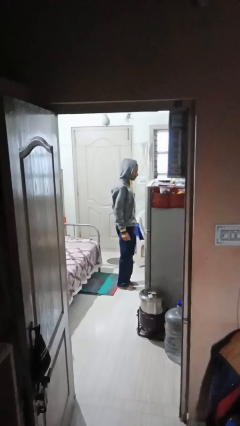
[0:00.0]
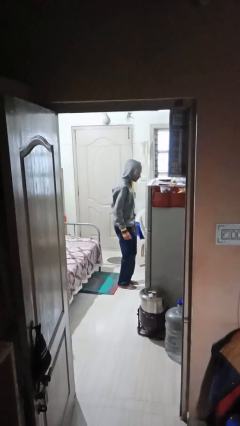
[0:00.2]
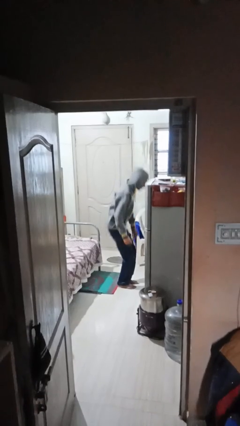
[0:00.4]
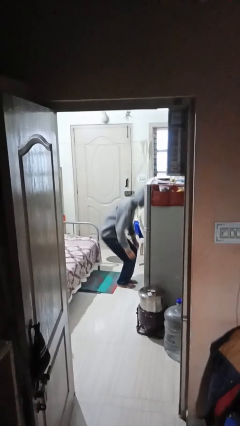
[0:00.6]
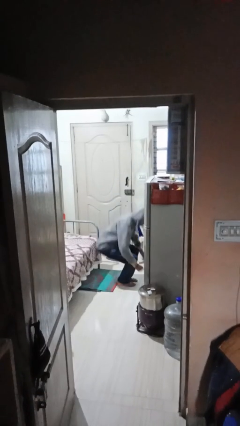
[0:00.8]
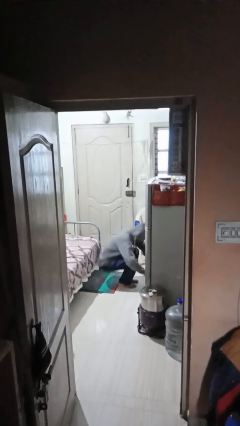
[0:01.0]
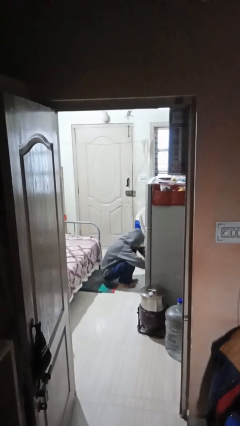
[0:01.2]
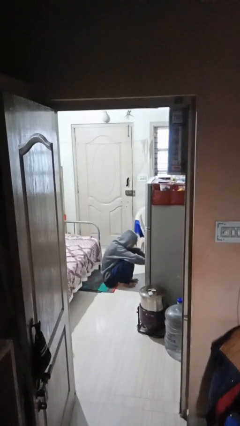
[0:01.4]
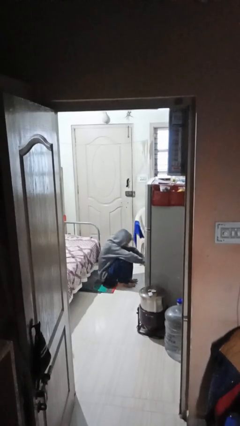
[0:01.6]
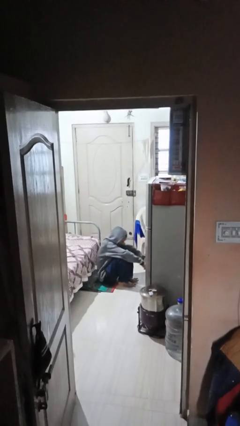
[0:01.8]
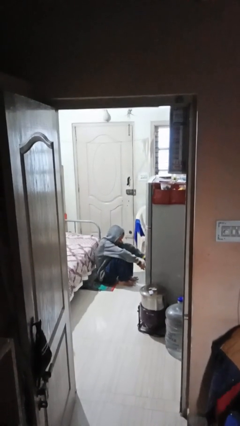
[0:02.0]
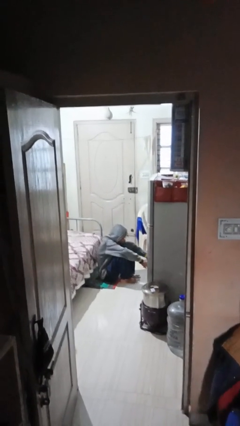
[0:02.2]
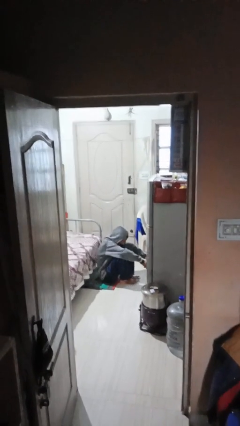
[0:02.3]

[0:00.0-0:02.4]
person sits down

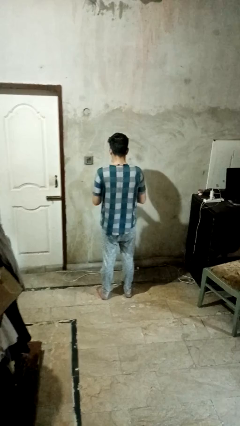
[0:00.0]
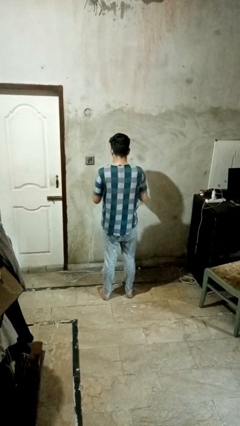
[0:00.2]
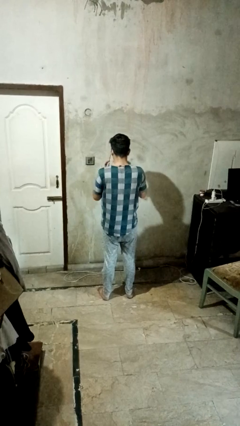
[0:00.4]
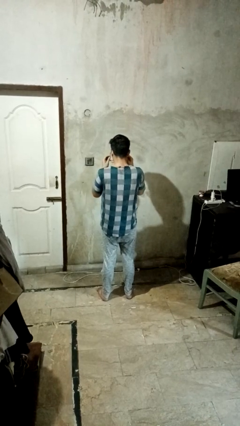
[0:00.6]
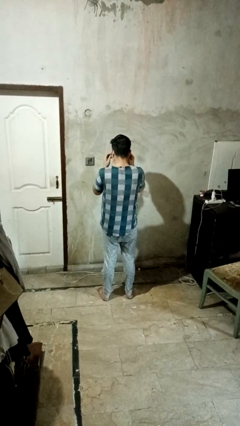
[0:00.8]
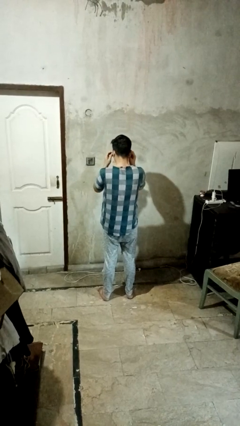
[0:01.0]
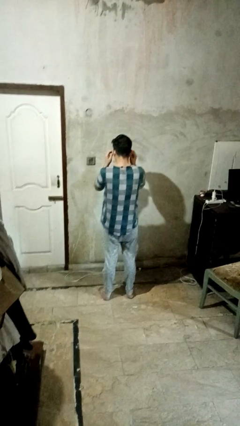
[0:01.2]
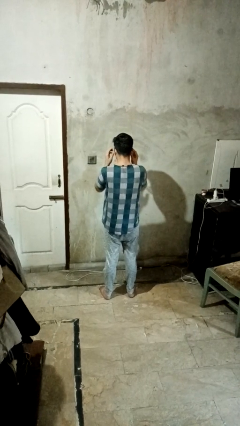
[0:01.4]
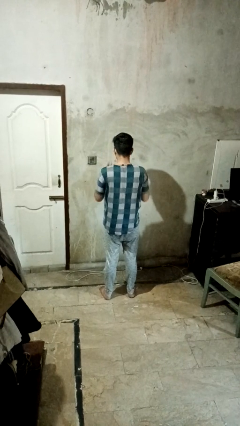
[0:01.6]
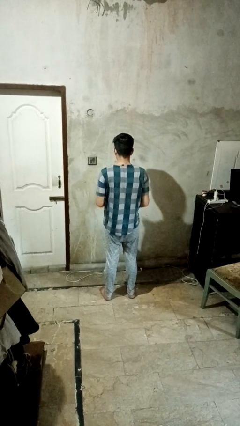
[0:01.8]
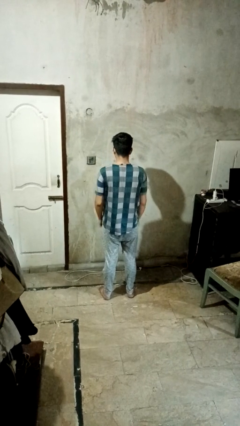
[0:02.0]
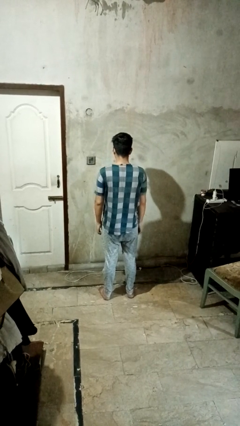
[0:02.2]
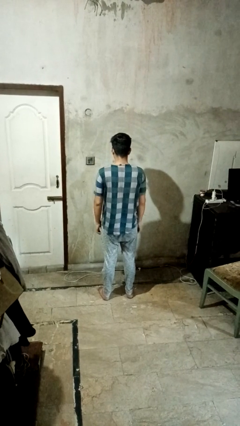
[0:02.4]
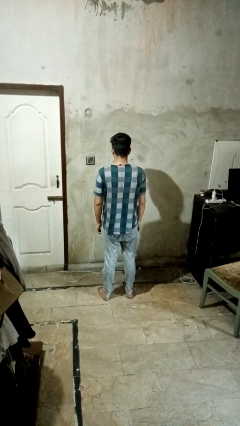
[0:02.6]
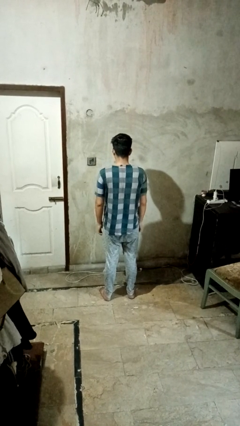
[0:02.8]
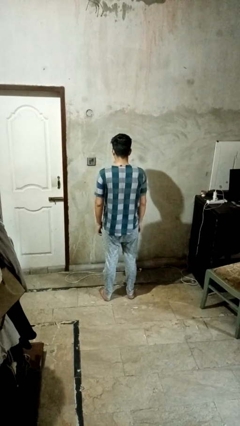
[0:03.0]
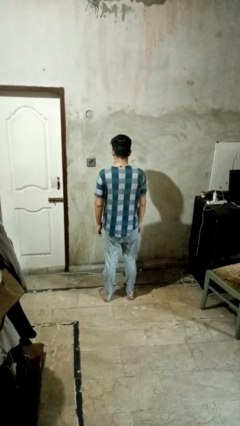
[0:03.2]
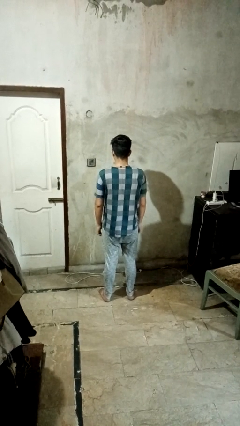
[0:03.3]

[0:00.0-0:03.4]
person puts on glasses

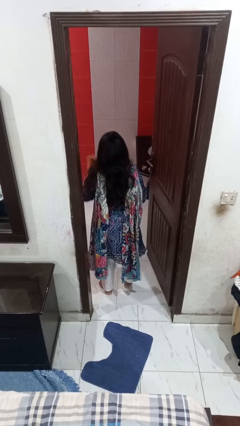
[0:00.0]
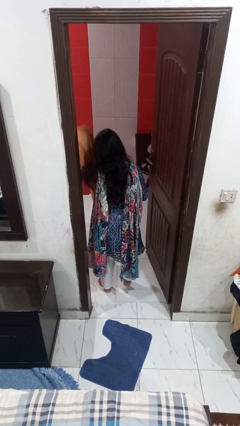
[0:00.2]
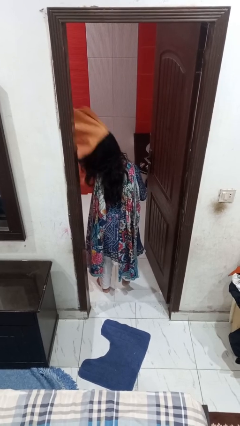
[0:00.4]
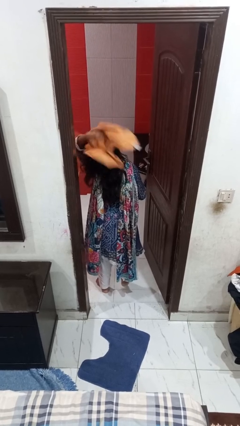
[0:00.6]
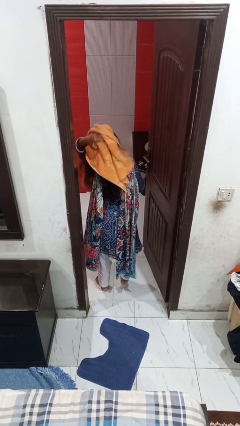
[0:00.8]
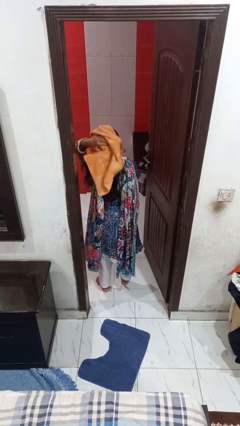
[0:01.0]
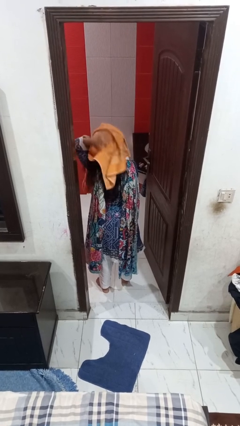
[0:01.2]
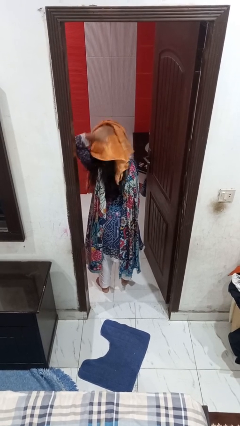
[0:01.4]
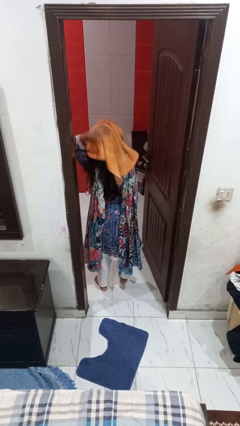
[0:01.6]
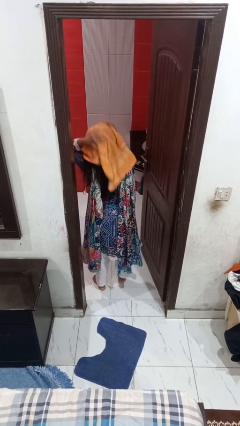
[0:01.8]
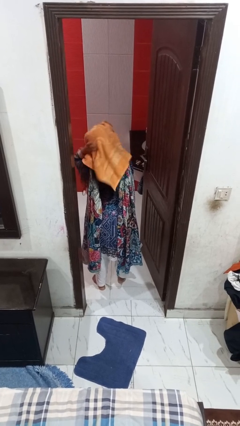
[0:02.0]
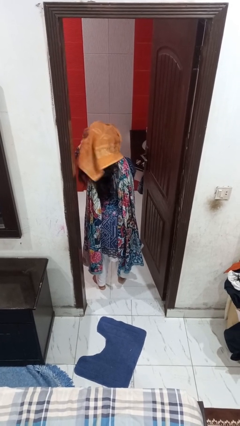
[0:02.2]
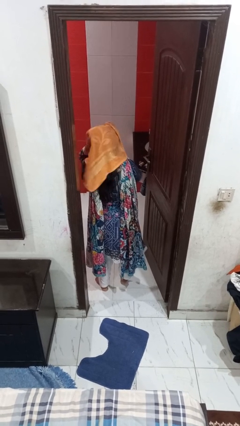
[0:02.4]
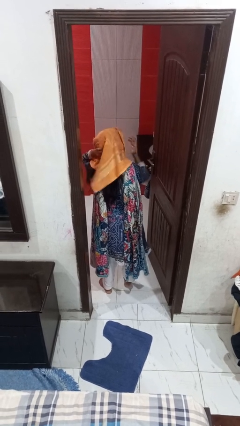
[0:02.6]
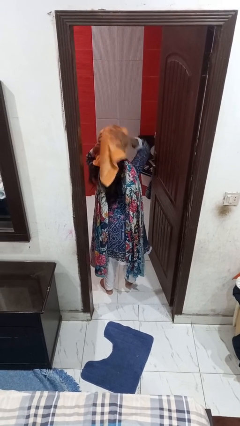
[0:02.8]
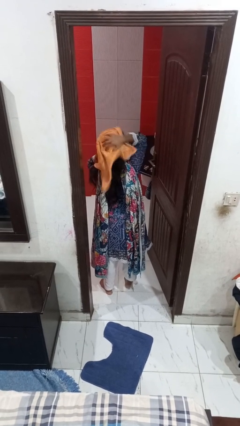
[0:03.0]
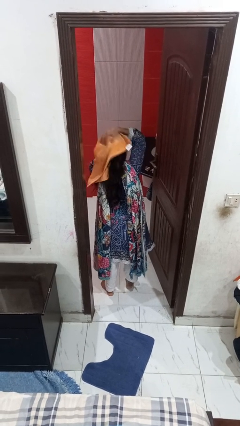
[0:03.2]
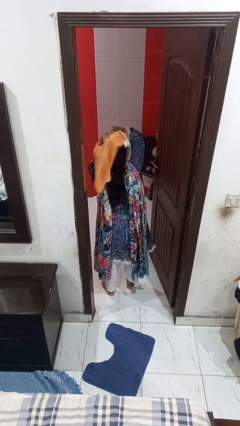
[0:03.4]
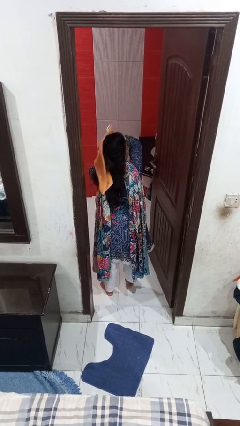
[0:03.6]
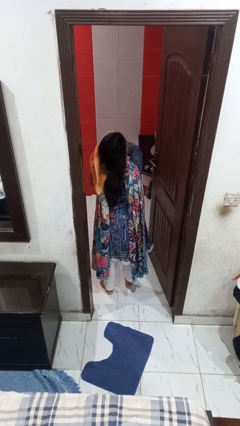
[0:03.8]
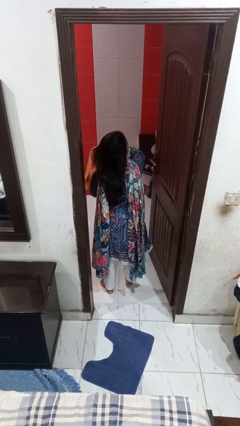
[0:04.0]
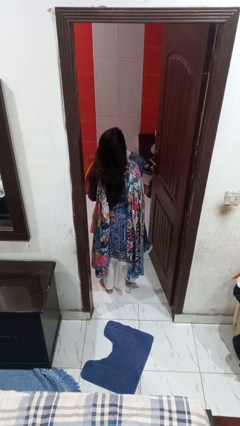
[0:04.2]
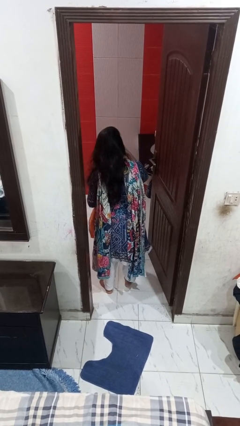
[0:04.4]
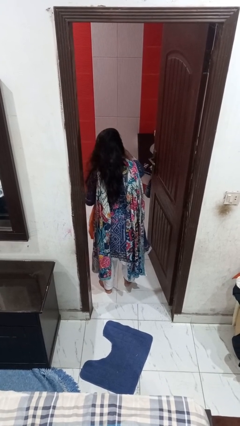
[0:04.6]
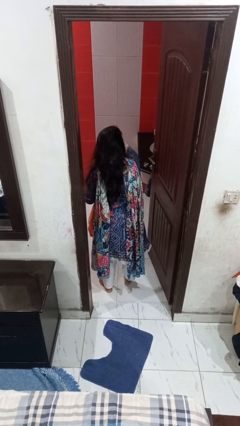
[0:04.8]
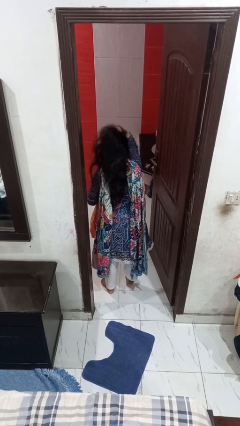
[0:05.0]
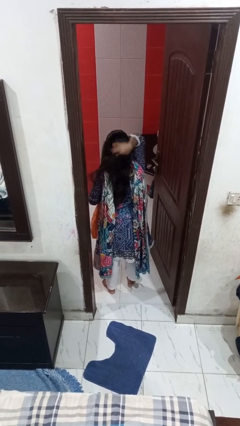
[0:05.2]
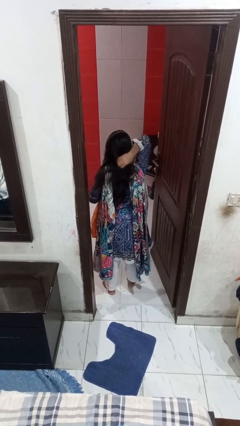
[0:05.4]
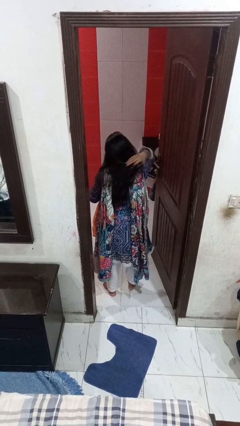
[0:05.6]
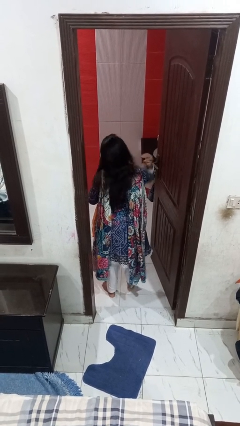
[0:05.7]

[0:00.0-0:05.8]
person dries hair with towel

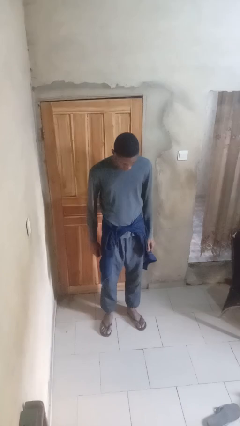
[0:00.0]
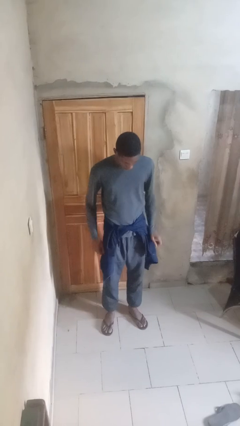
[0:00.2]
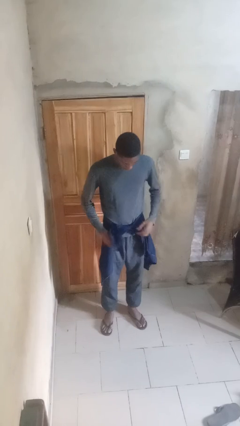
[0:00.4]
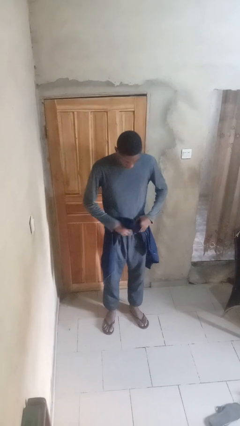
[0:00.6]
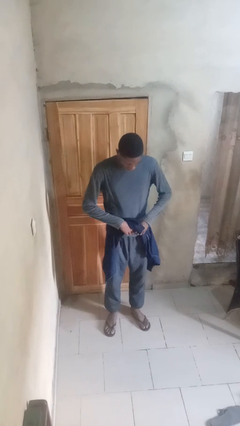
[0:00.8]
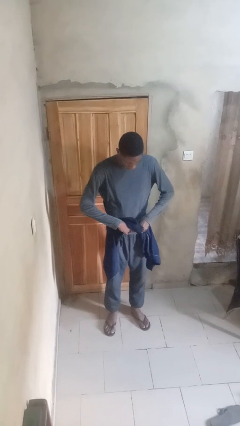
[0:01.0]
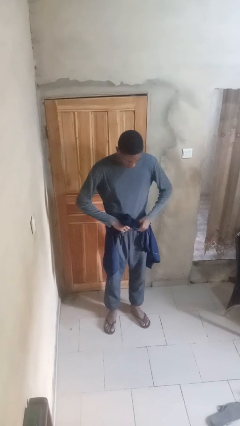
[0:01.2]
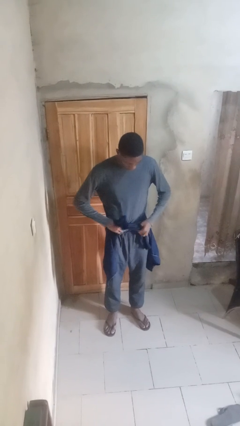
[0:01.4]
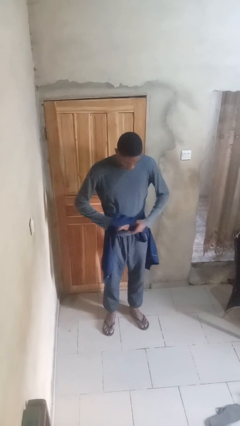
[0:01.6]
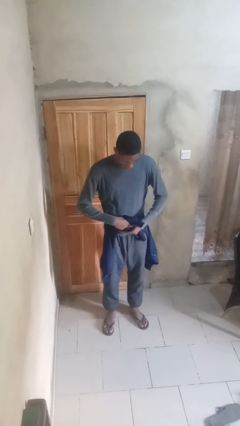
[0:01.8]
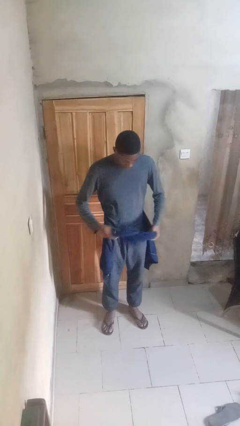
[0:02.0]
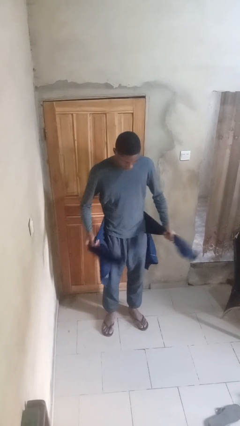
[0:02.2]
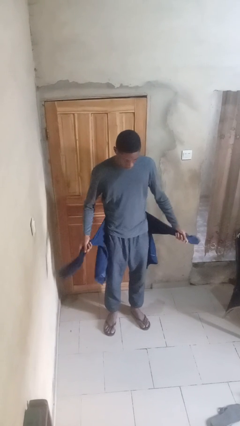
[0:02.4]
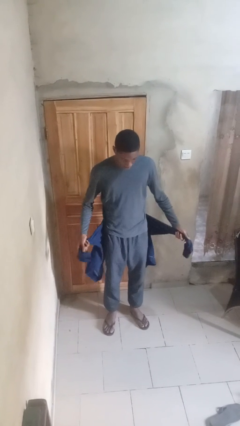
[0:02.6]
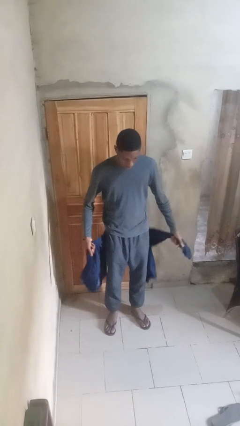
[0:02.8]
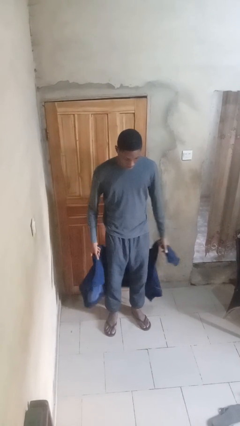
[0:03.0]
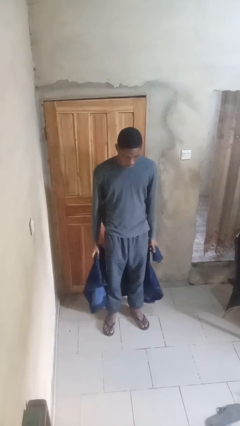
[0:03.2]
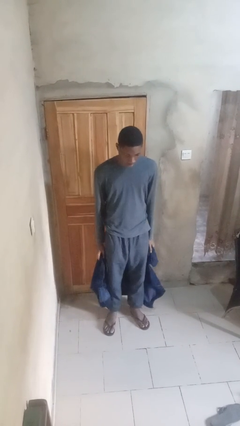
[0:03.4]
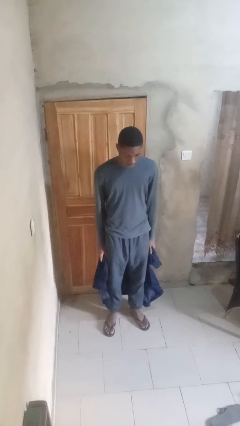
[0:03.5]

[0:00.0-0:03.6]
person unties jacket around waist

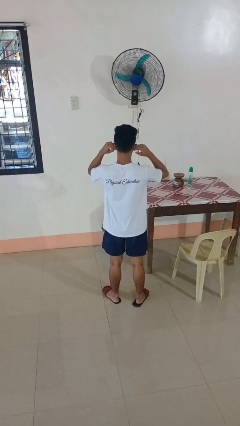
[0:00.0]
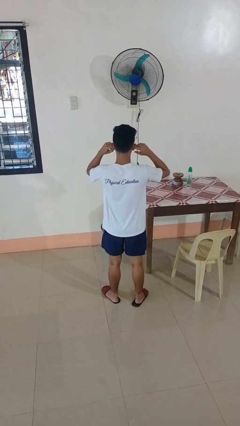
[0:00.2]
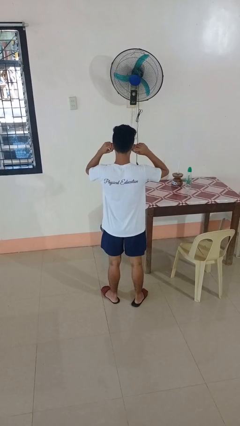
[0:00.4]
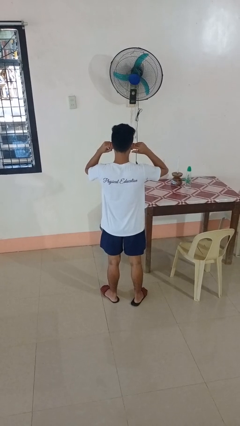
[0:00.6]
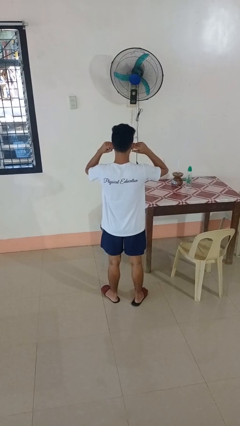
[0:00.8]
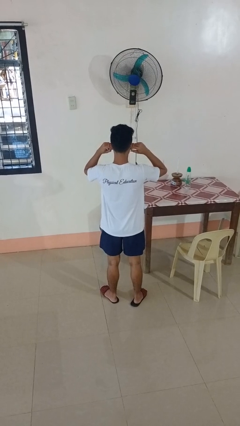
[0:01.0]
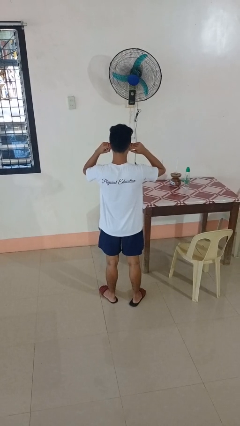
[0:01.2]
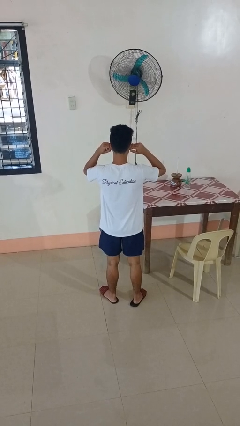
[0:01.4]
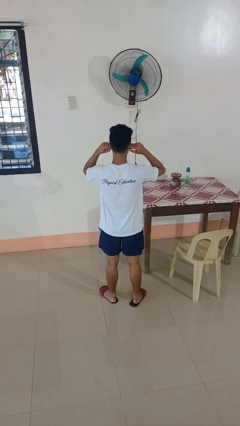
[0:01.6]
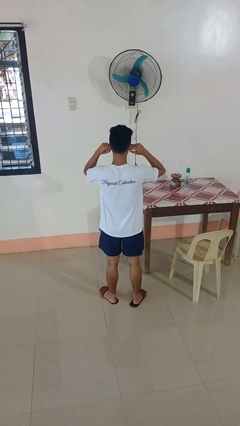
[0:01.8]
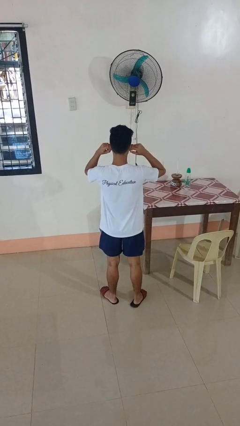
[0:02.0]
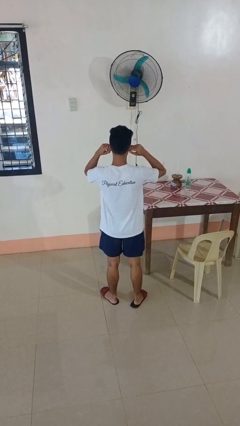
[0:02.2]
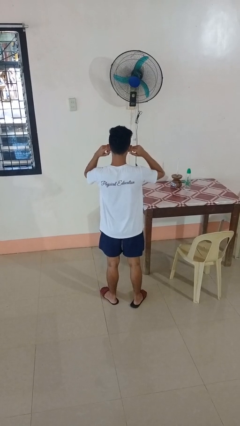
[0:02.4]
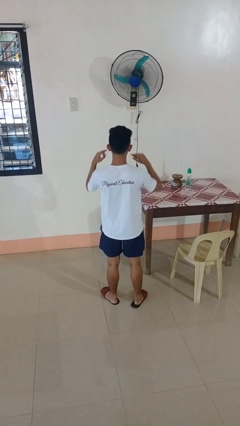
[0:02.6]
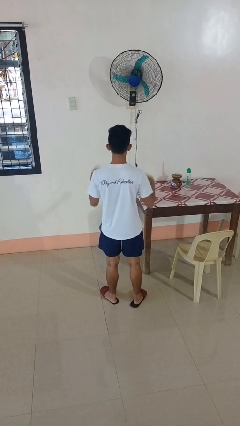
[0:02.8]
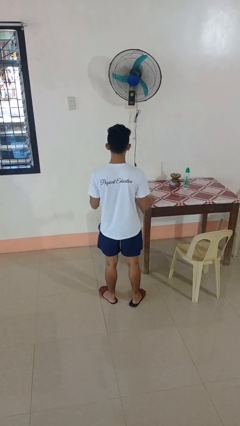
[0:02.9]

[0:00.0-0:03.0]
person puts fingers in ear
